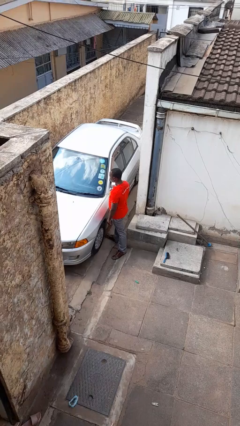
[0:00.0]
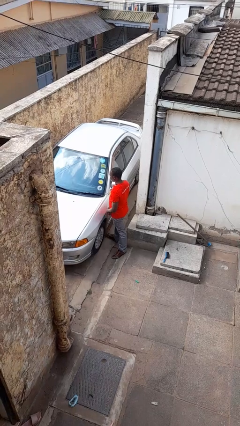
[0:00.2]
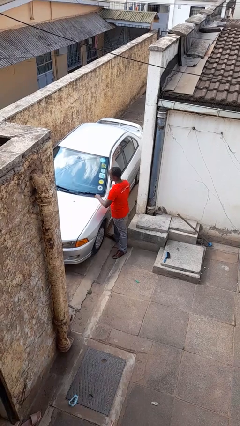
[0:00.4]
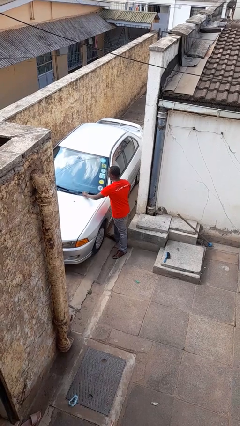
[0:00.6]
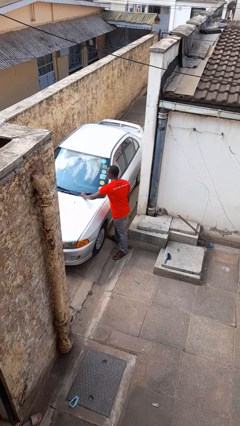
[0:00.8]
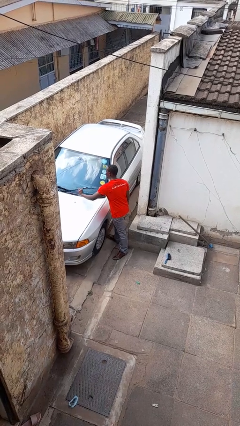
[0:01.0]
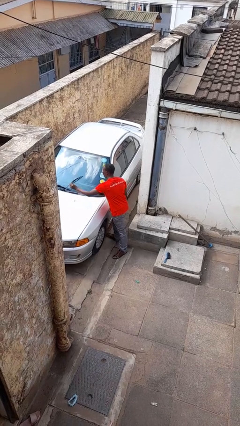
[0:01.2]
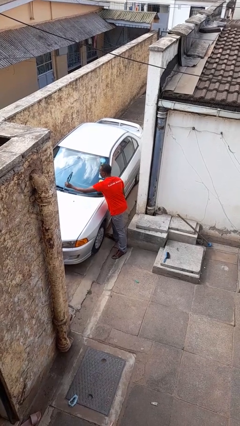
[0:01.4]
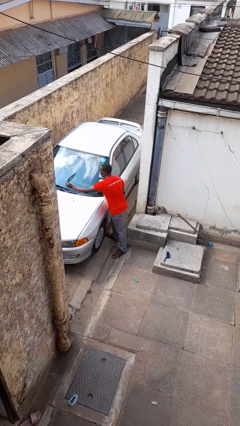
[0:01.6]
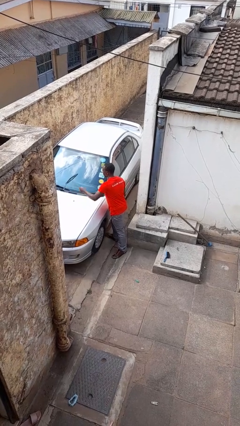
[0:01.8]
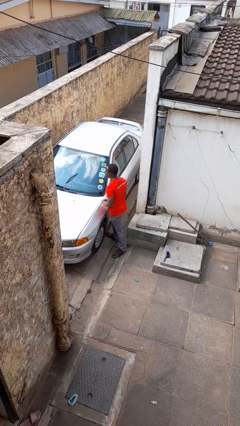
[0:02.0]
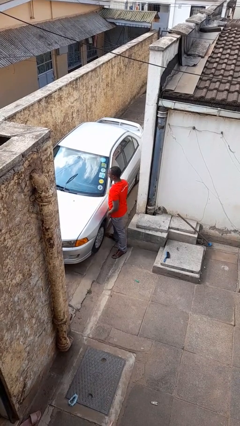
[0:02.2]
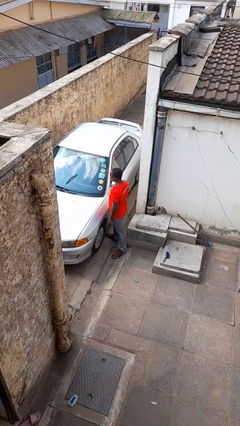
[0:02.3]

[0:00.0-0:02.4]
person flips up car wipers

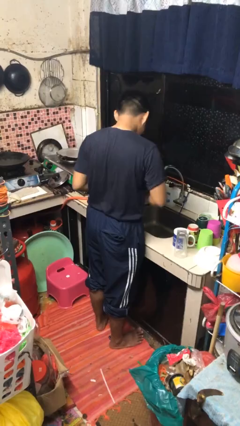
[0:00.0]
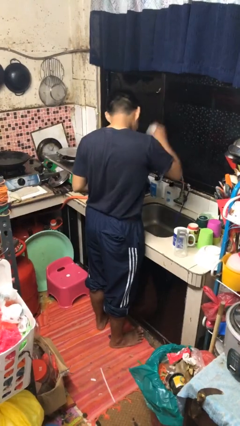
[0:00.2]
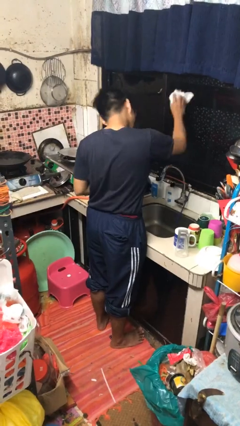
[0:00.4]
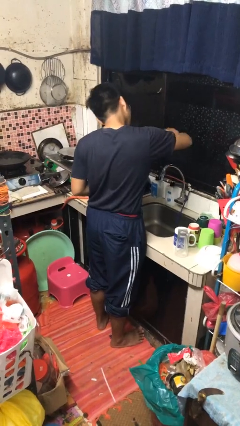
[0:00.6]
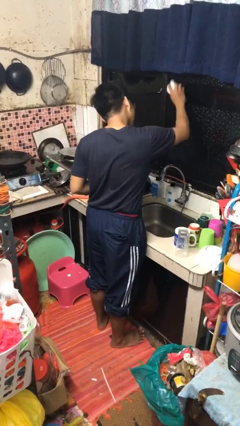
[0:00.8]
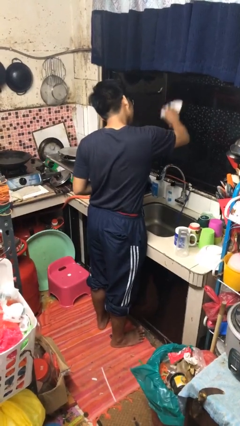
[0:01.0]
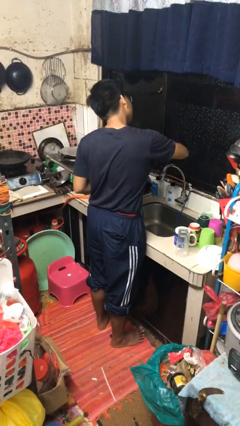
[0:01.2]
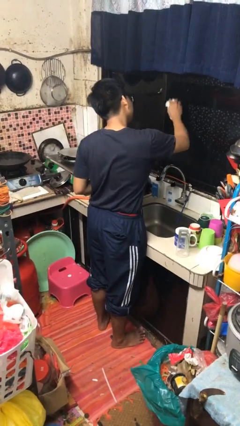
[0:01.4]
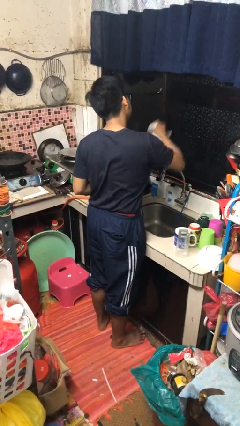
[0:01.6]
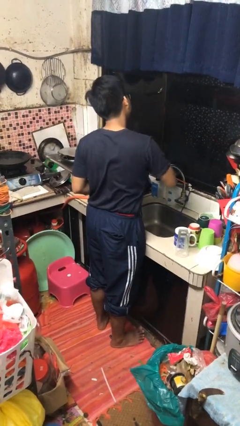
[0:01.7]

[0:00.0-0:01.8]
person washes window

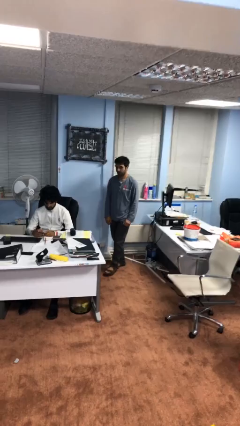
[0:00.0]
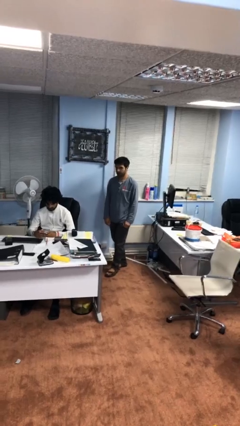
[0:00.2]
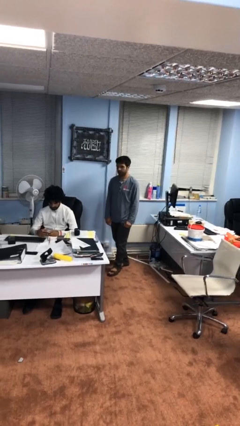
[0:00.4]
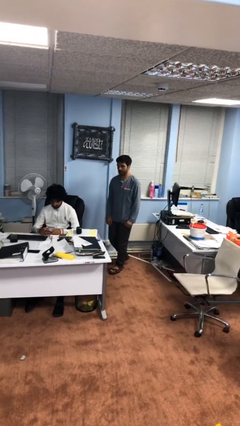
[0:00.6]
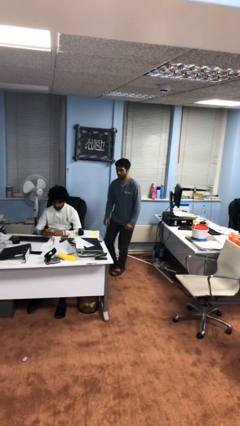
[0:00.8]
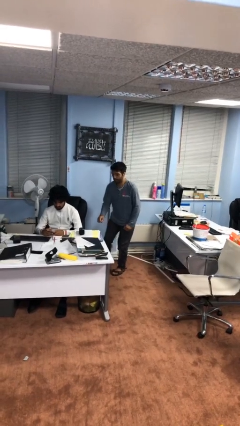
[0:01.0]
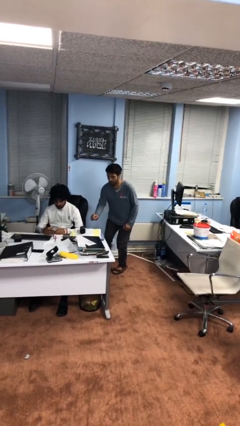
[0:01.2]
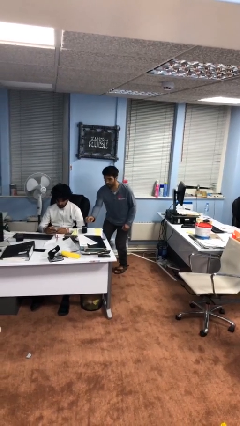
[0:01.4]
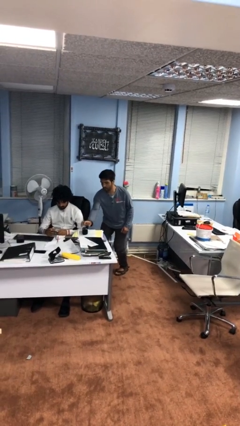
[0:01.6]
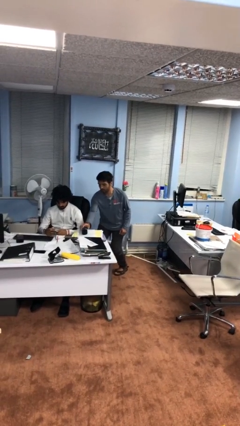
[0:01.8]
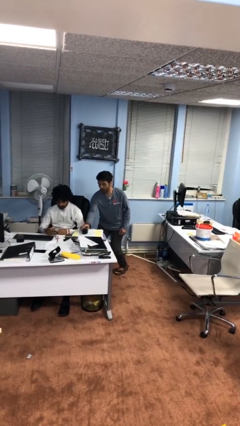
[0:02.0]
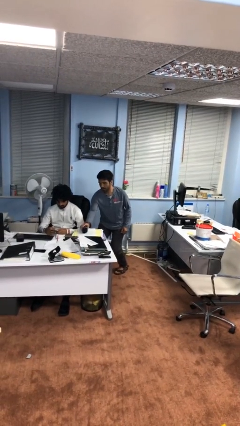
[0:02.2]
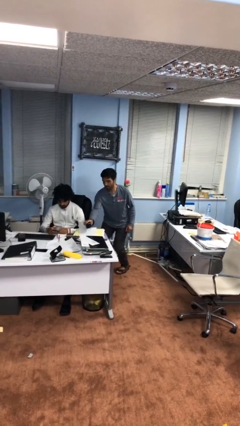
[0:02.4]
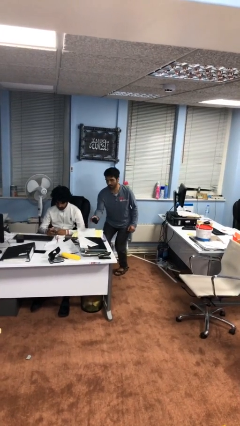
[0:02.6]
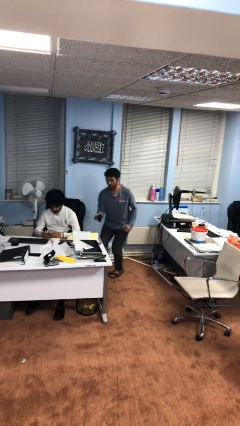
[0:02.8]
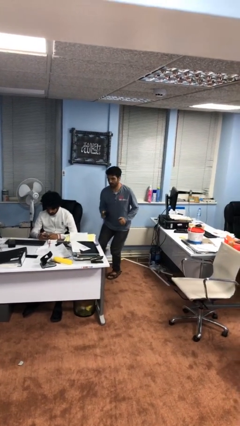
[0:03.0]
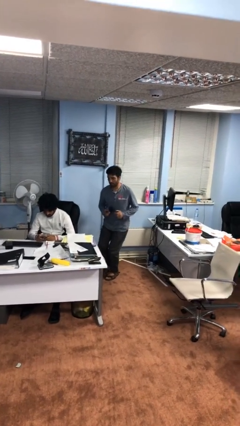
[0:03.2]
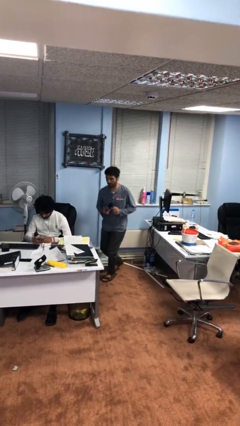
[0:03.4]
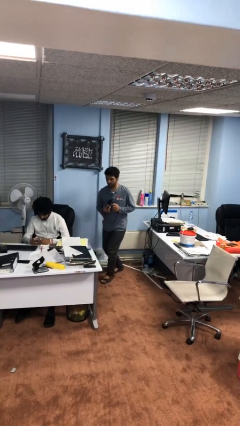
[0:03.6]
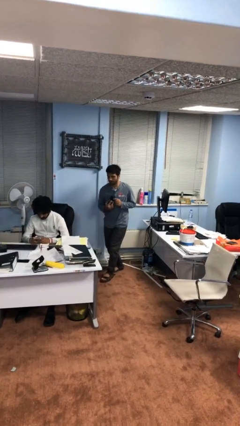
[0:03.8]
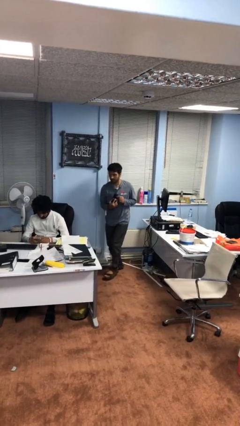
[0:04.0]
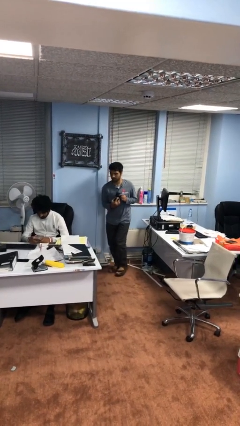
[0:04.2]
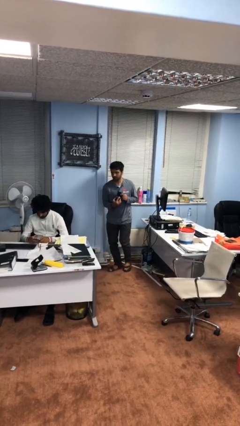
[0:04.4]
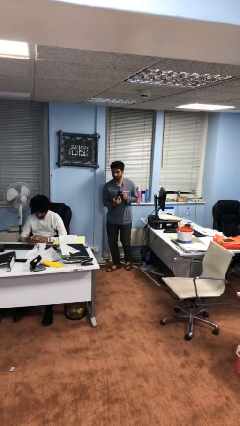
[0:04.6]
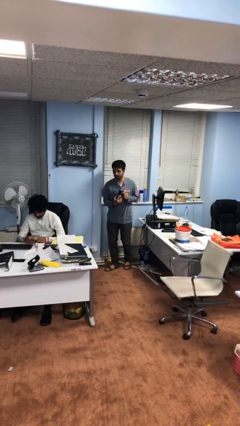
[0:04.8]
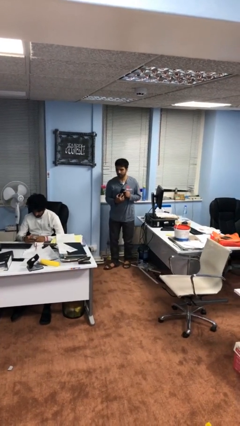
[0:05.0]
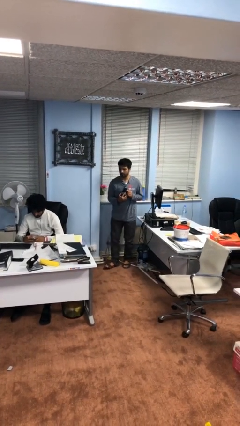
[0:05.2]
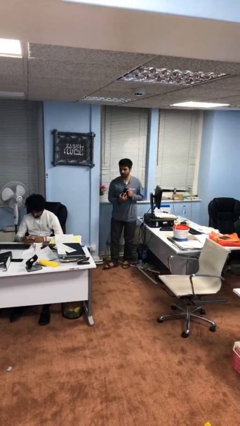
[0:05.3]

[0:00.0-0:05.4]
person steals object from person

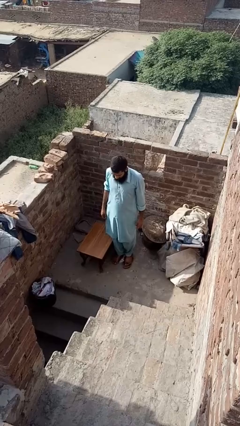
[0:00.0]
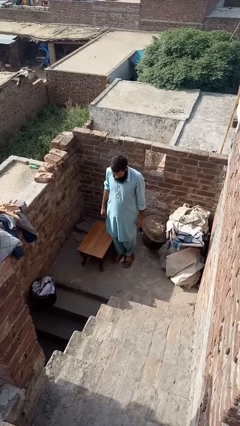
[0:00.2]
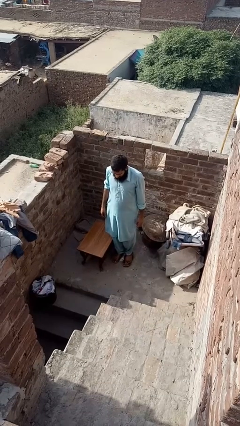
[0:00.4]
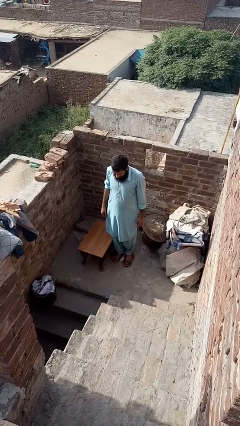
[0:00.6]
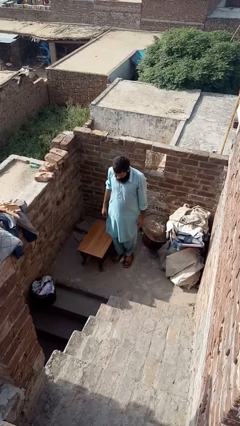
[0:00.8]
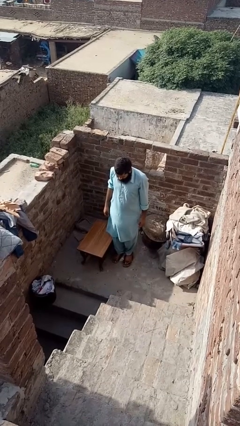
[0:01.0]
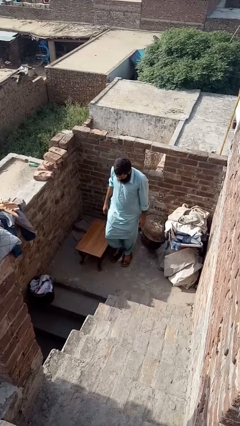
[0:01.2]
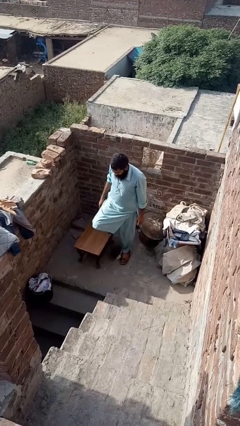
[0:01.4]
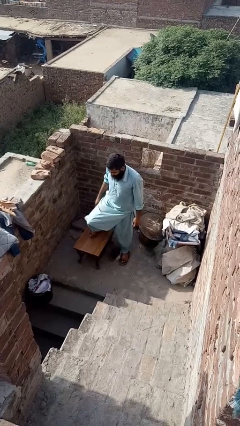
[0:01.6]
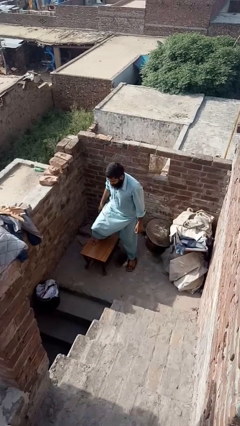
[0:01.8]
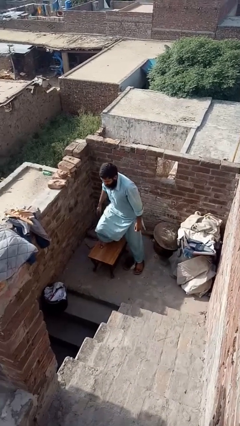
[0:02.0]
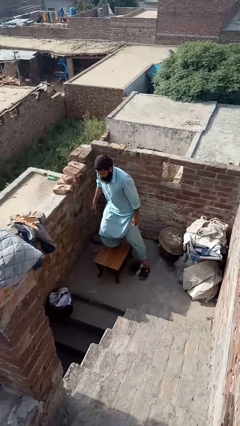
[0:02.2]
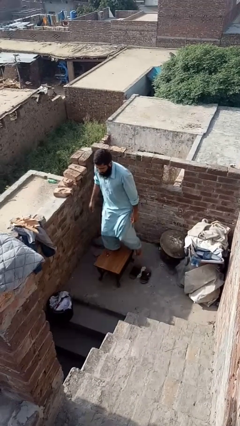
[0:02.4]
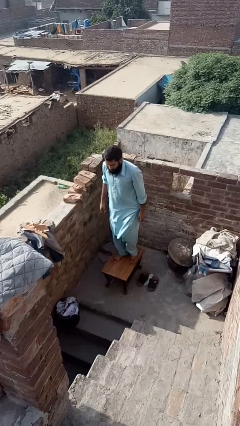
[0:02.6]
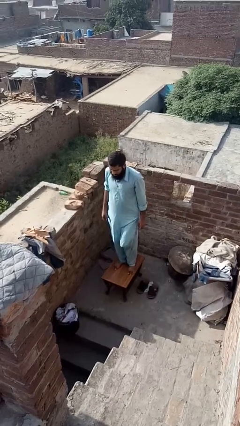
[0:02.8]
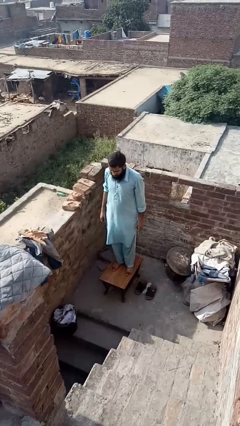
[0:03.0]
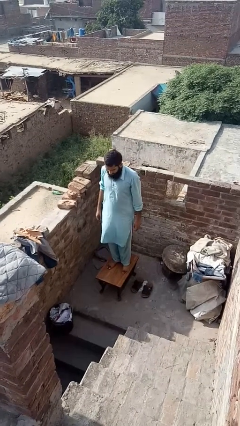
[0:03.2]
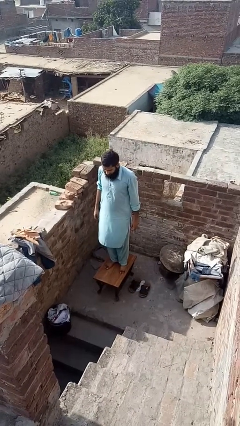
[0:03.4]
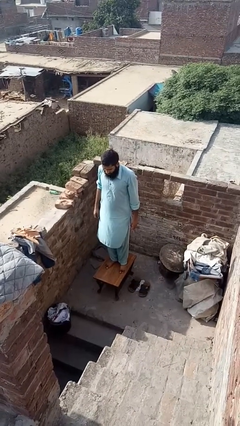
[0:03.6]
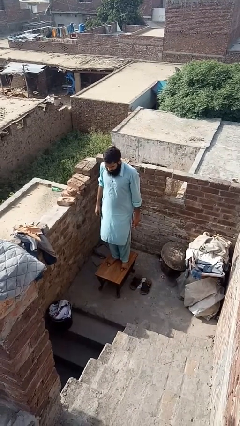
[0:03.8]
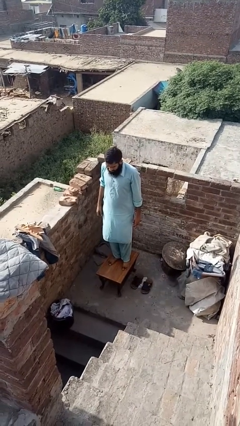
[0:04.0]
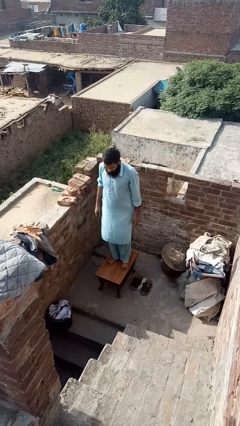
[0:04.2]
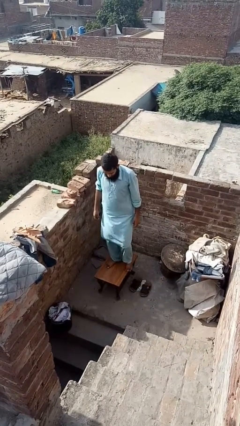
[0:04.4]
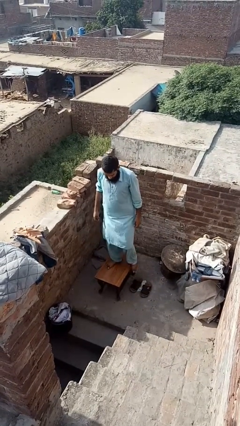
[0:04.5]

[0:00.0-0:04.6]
person climbs on table

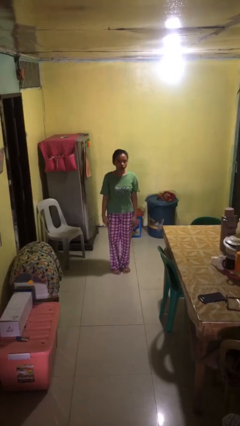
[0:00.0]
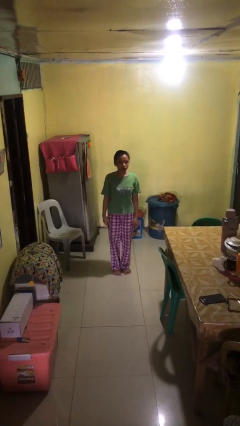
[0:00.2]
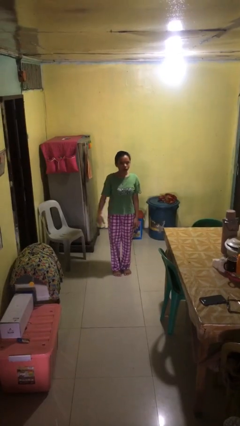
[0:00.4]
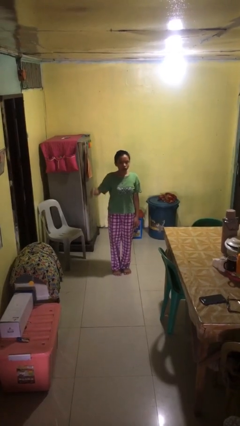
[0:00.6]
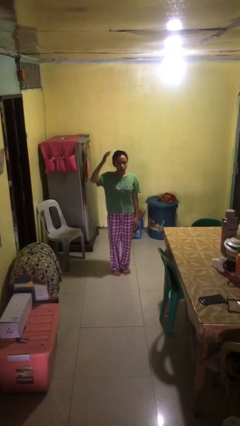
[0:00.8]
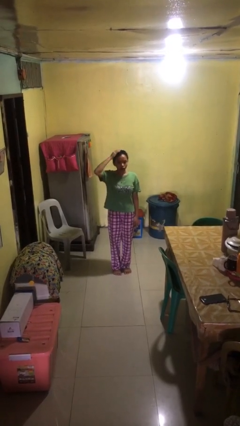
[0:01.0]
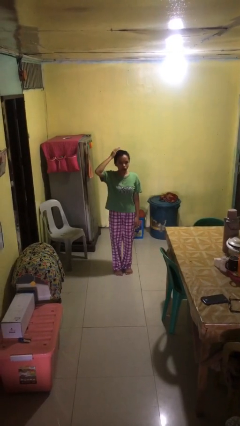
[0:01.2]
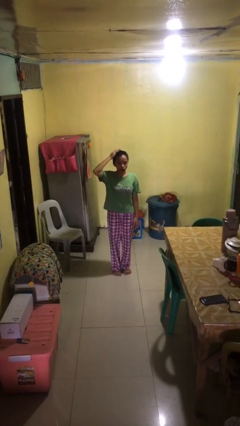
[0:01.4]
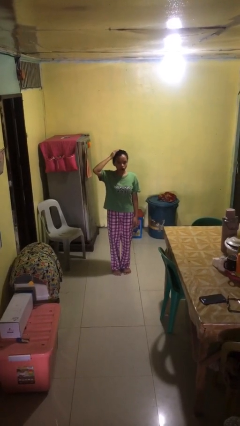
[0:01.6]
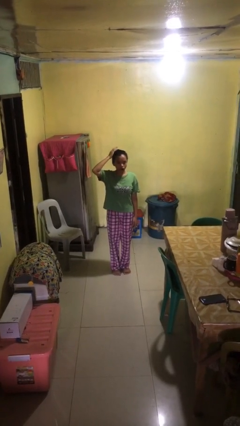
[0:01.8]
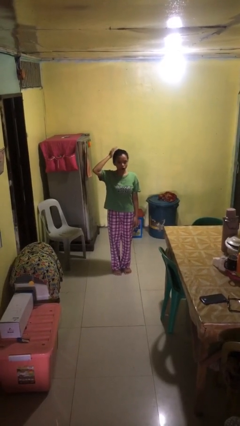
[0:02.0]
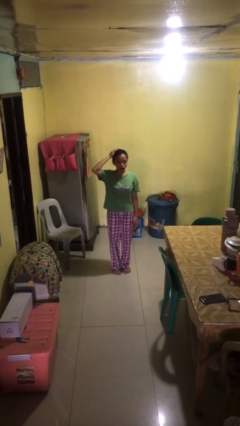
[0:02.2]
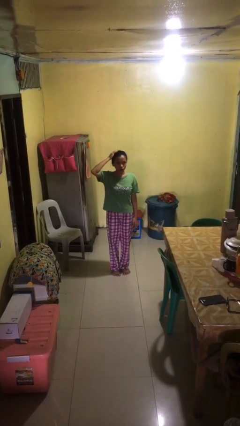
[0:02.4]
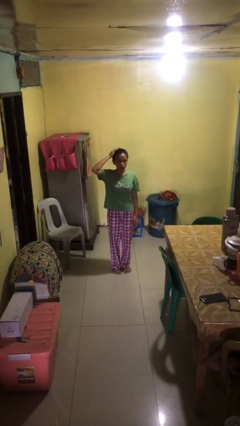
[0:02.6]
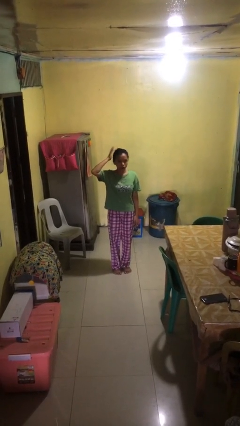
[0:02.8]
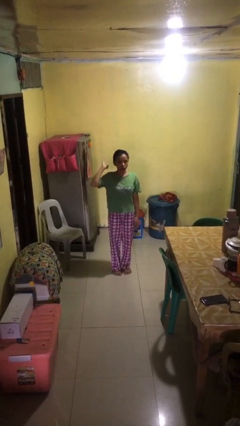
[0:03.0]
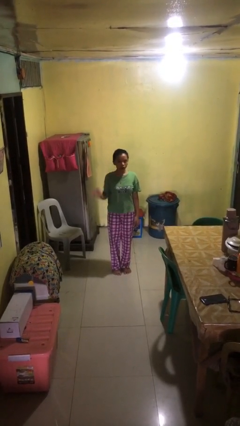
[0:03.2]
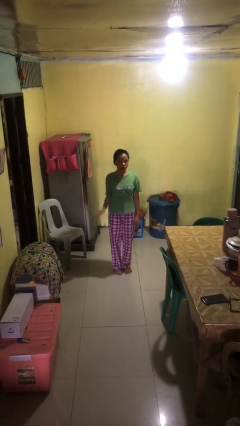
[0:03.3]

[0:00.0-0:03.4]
person pats head
